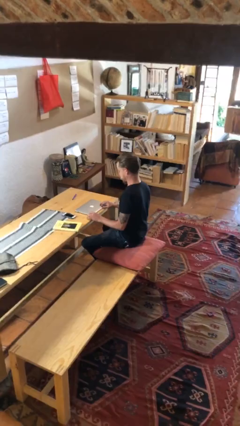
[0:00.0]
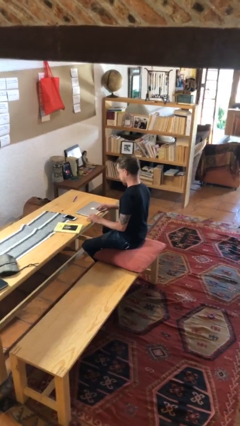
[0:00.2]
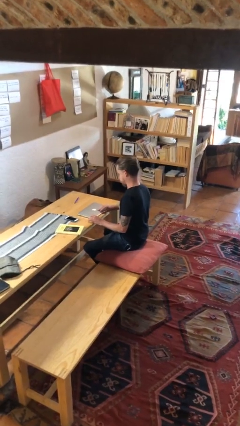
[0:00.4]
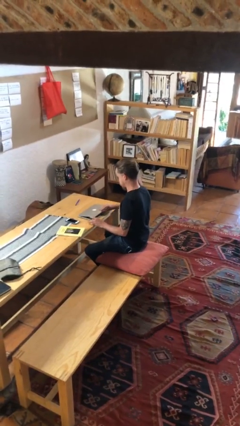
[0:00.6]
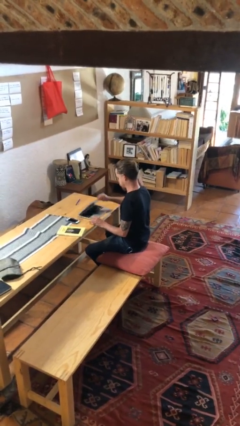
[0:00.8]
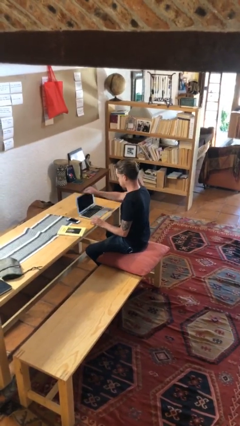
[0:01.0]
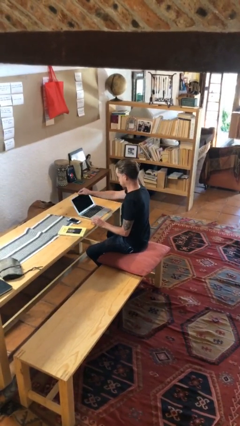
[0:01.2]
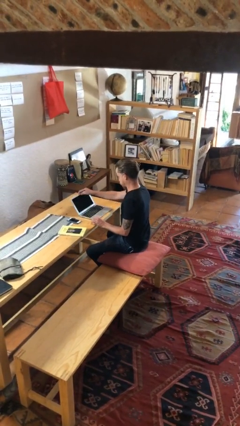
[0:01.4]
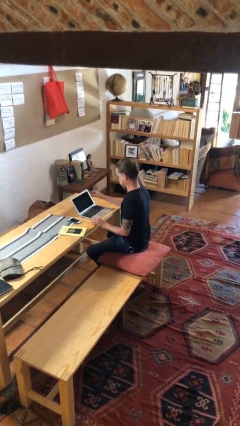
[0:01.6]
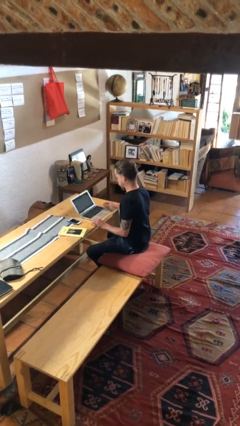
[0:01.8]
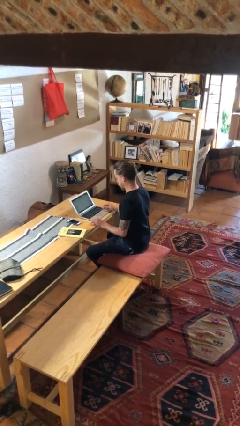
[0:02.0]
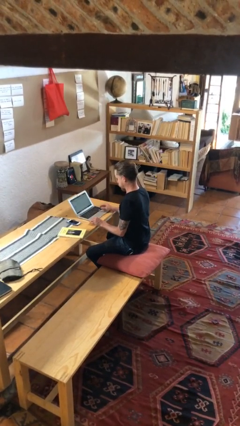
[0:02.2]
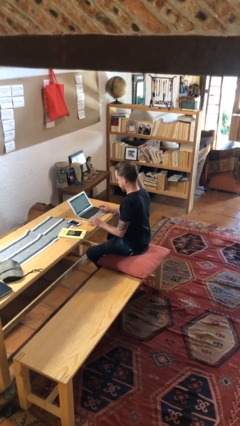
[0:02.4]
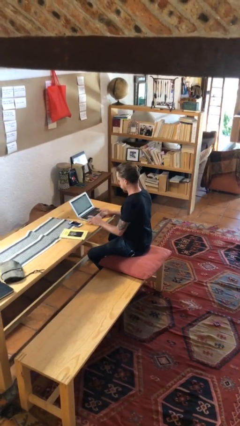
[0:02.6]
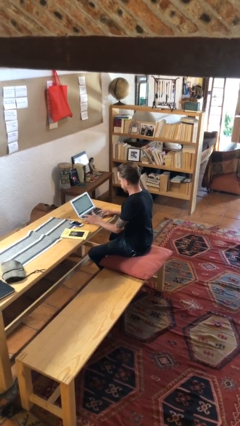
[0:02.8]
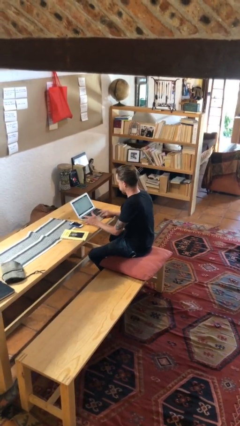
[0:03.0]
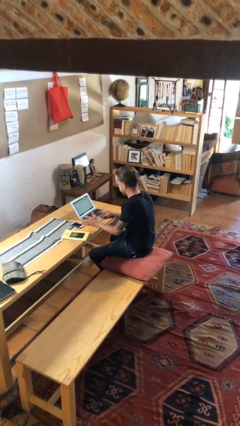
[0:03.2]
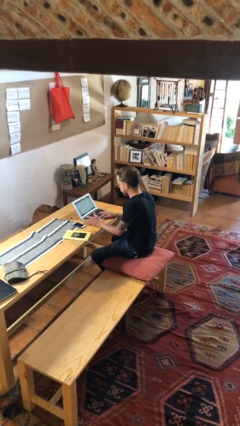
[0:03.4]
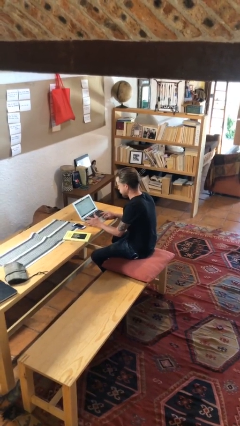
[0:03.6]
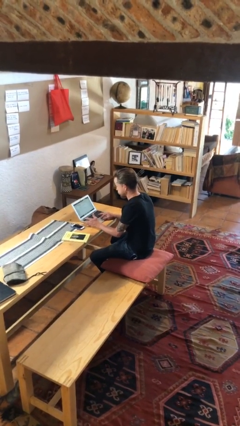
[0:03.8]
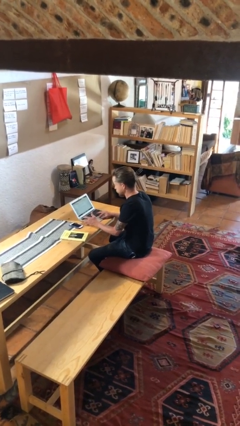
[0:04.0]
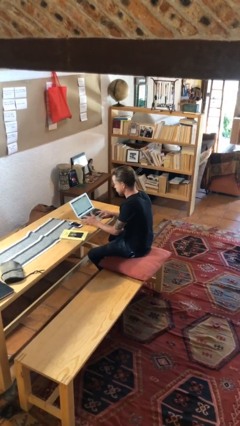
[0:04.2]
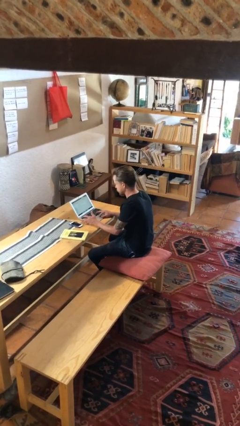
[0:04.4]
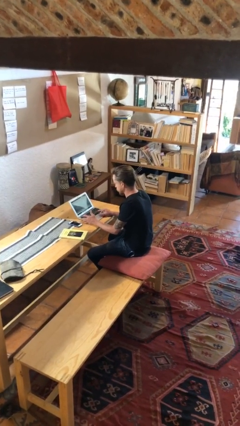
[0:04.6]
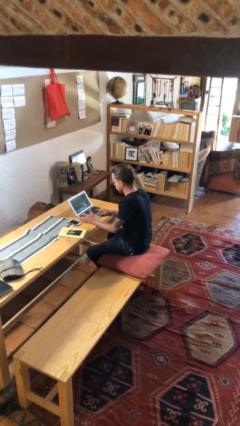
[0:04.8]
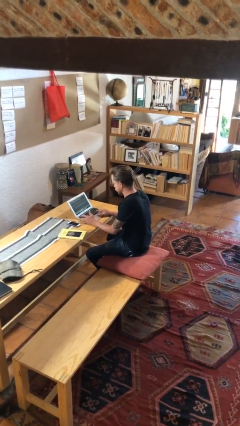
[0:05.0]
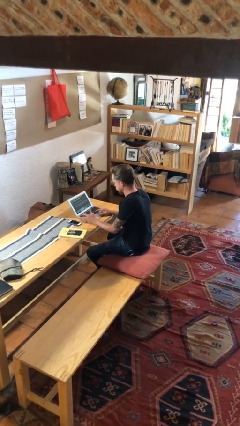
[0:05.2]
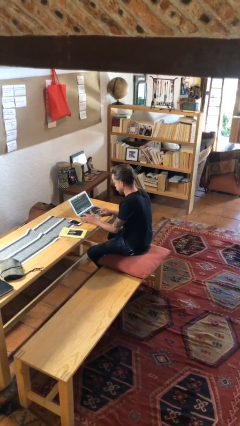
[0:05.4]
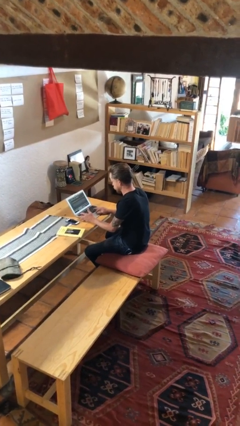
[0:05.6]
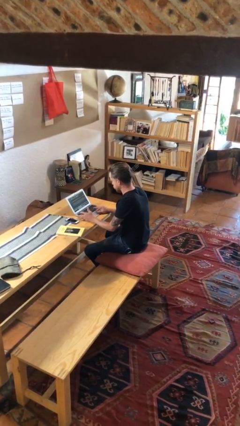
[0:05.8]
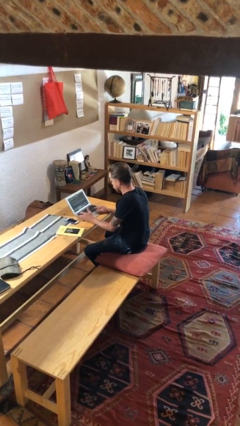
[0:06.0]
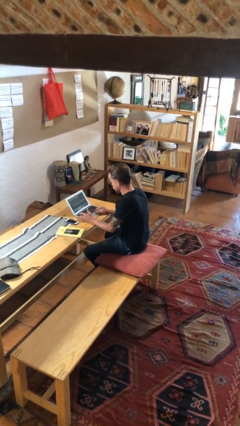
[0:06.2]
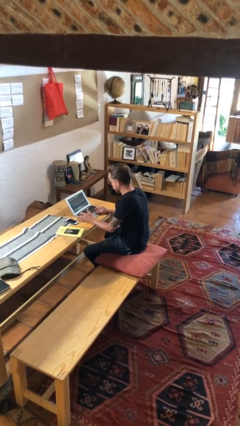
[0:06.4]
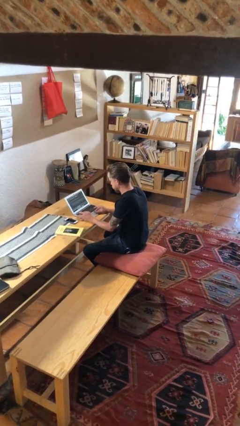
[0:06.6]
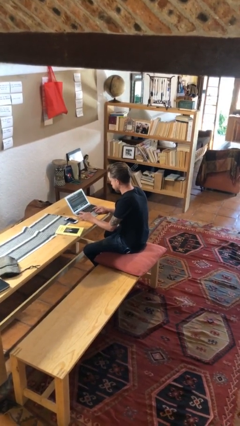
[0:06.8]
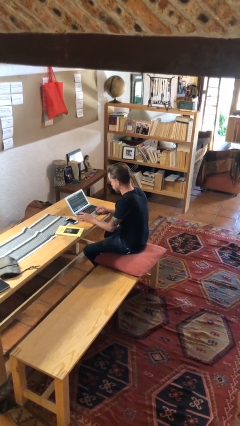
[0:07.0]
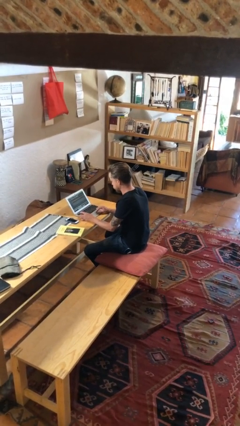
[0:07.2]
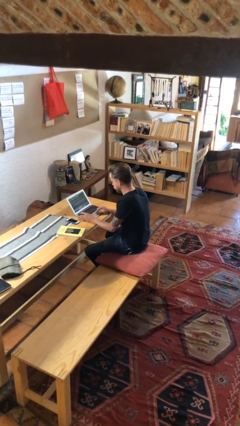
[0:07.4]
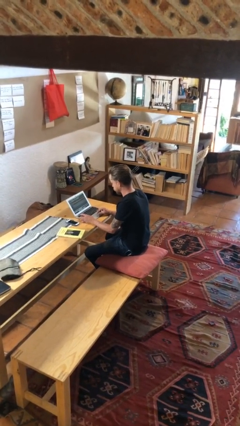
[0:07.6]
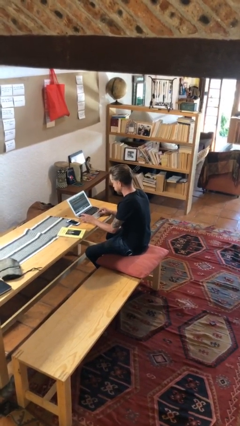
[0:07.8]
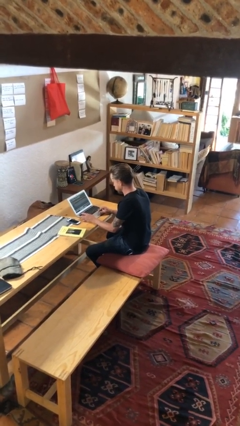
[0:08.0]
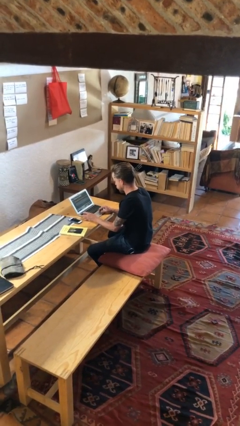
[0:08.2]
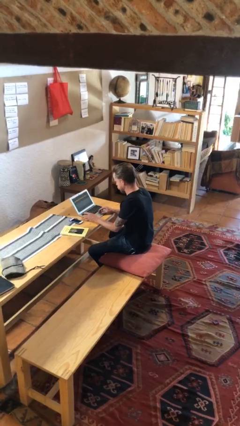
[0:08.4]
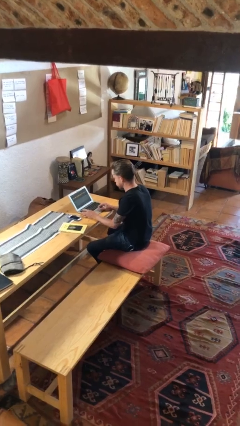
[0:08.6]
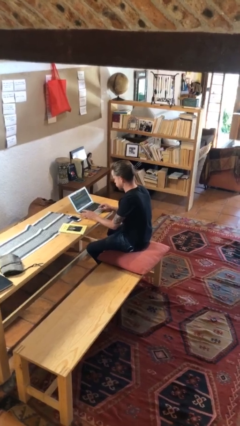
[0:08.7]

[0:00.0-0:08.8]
person interacts with laptop

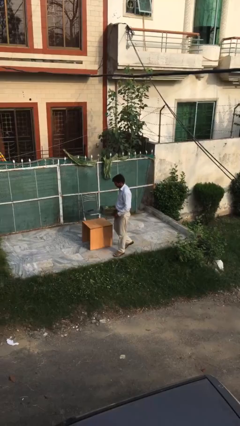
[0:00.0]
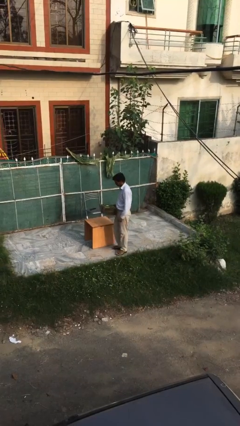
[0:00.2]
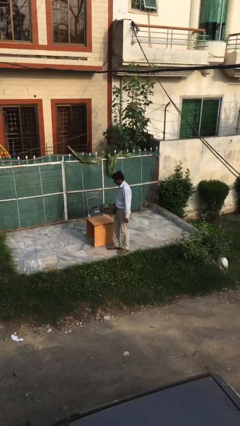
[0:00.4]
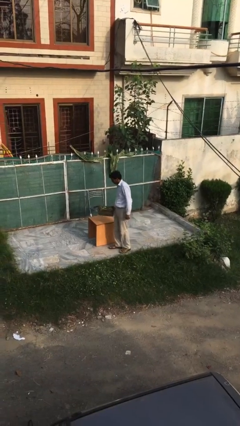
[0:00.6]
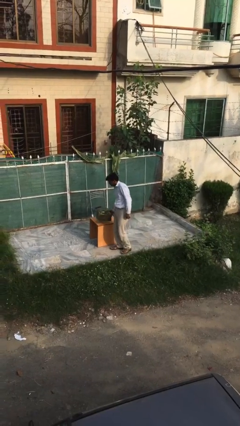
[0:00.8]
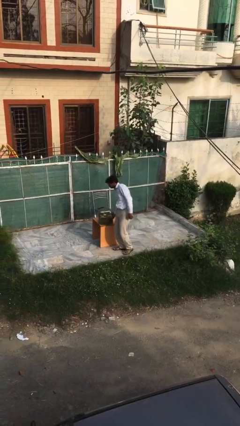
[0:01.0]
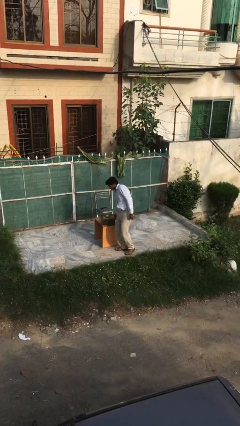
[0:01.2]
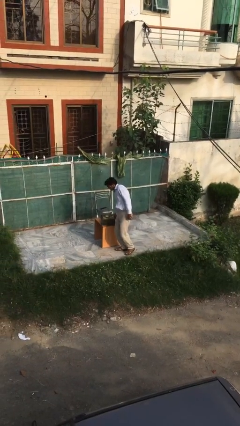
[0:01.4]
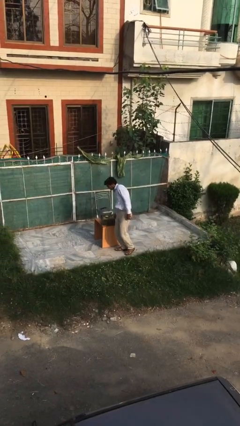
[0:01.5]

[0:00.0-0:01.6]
person puts down object on table

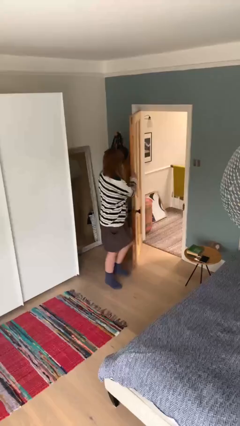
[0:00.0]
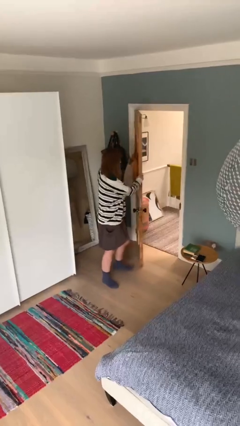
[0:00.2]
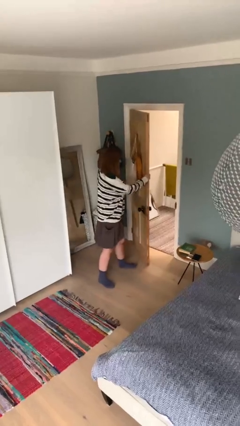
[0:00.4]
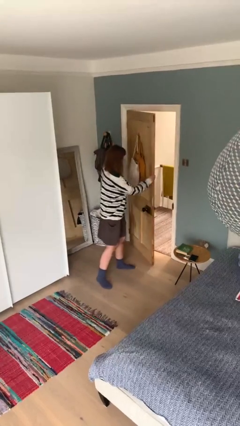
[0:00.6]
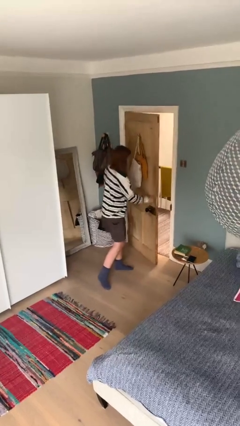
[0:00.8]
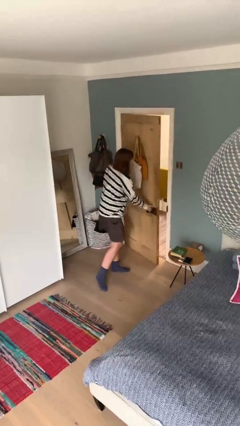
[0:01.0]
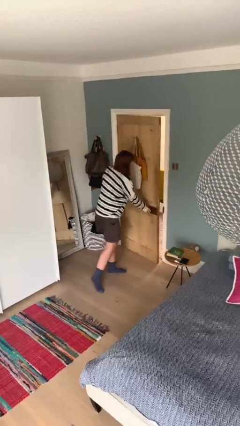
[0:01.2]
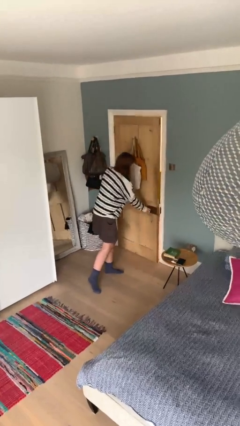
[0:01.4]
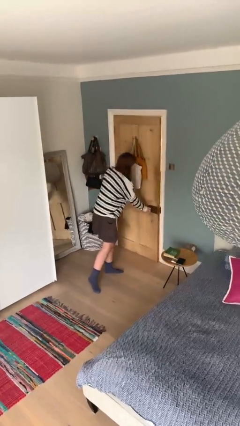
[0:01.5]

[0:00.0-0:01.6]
person closes facility door

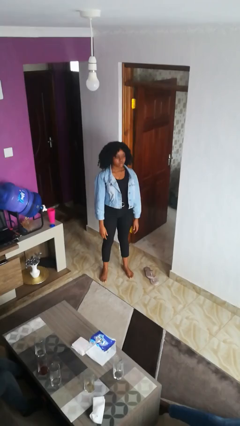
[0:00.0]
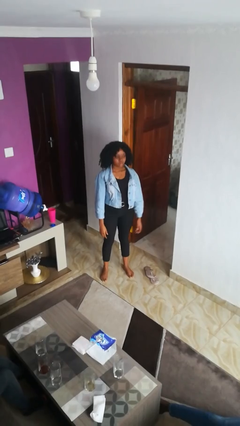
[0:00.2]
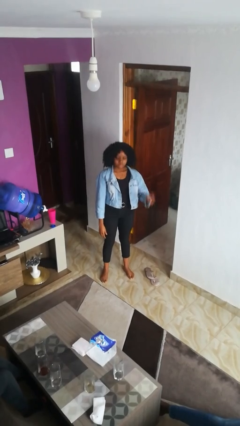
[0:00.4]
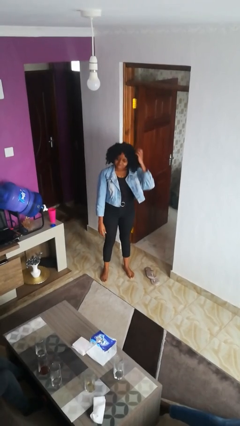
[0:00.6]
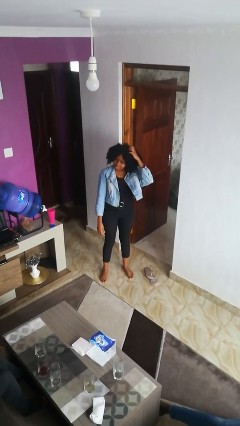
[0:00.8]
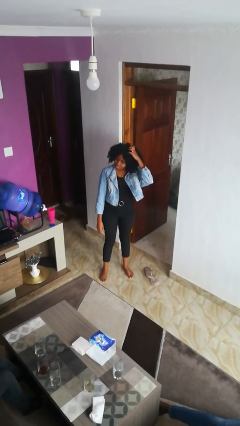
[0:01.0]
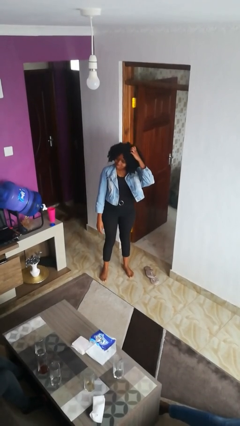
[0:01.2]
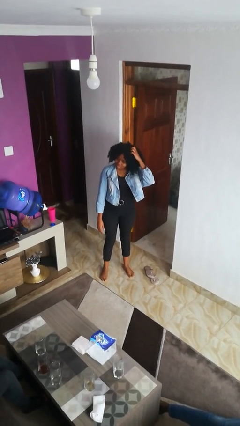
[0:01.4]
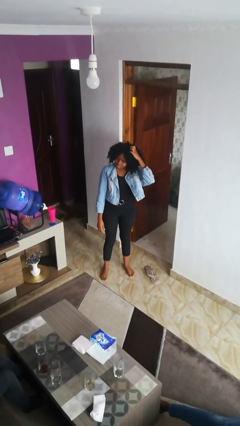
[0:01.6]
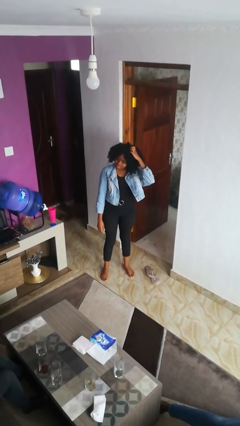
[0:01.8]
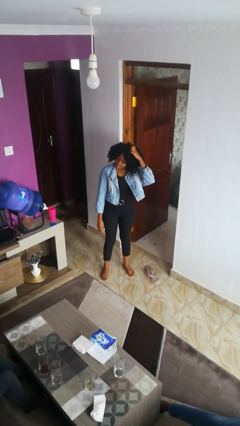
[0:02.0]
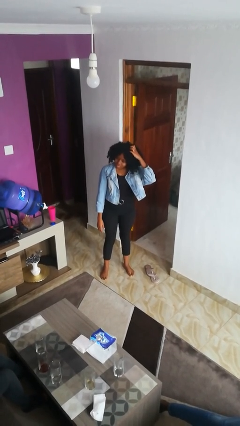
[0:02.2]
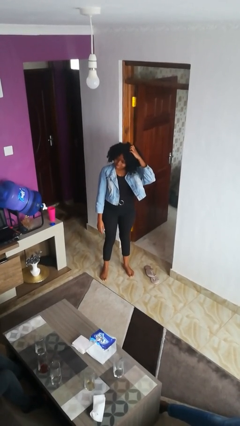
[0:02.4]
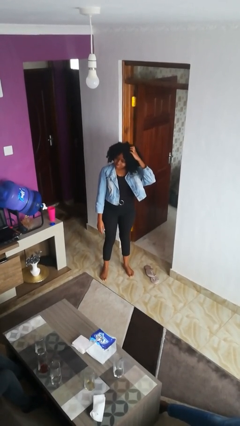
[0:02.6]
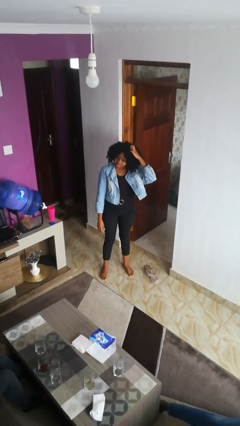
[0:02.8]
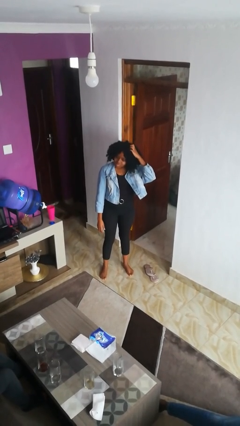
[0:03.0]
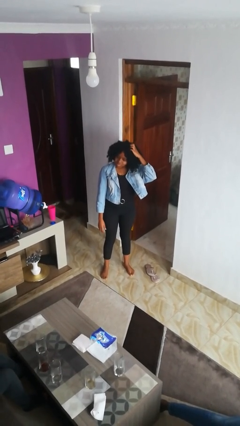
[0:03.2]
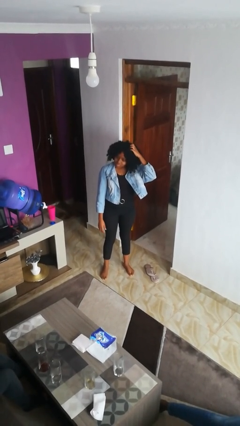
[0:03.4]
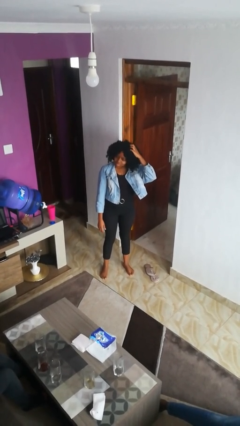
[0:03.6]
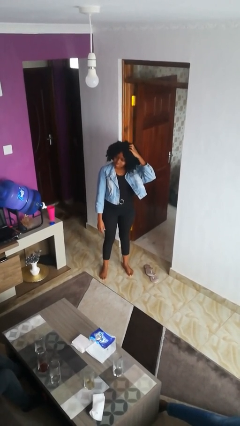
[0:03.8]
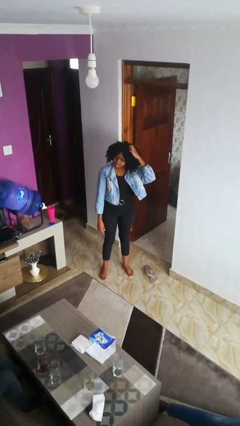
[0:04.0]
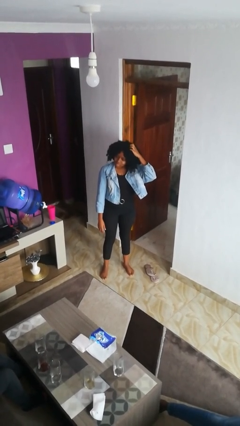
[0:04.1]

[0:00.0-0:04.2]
person scratches face

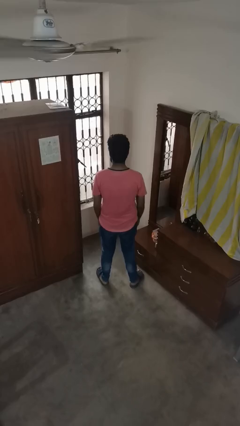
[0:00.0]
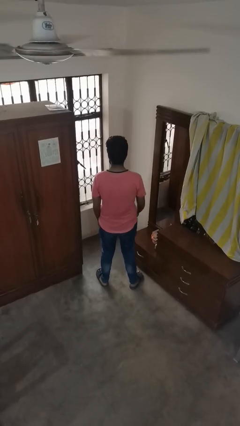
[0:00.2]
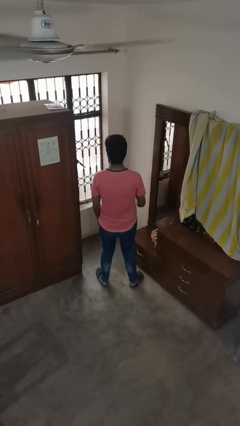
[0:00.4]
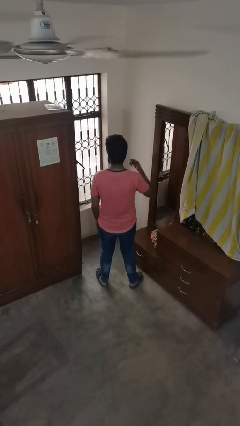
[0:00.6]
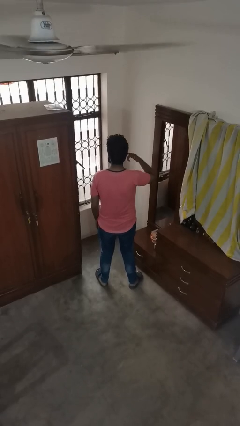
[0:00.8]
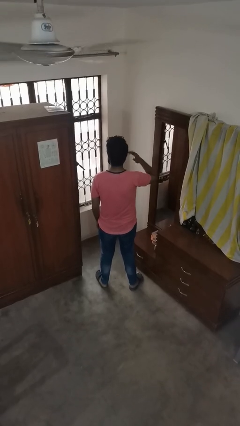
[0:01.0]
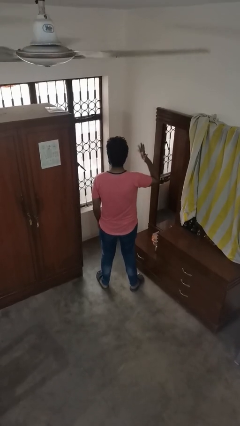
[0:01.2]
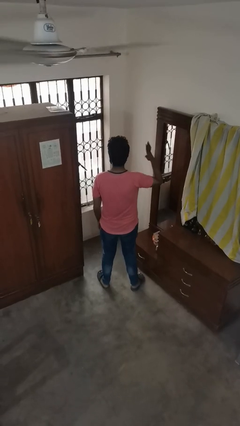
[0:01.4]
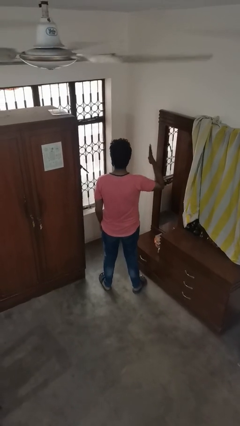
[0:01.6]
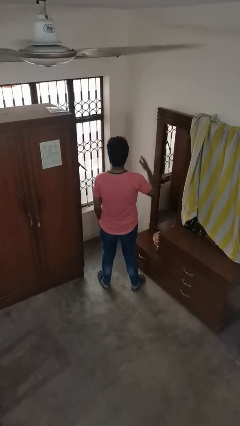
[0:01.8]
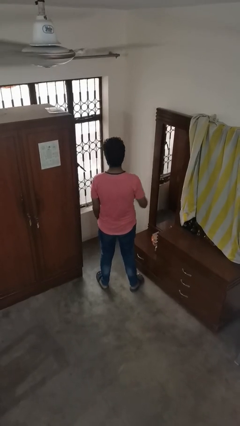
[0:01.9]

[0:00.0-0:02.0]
person puts fingers in ear
